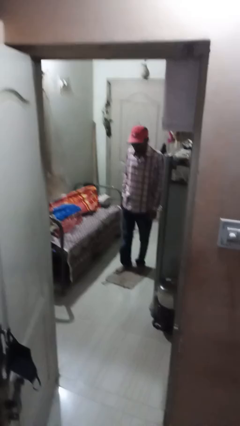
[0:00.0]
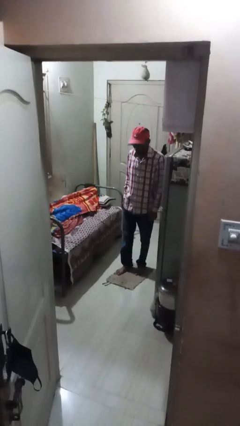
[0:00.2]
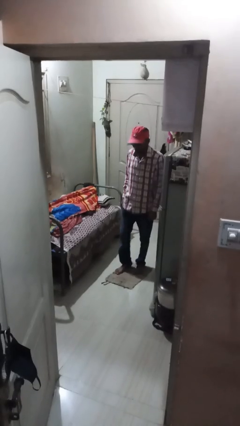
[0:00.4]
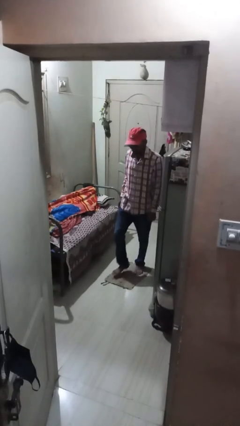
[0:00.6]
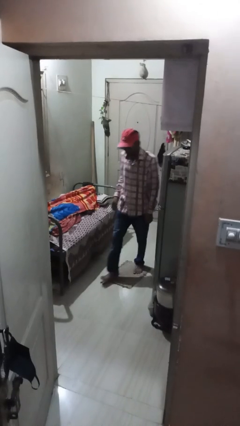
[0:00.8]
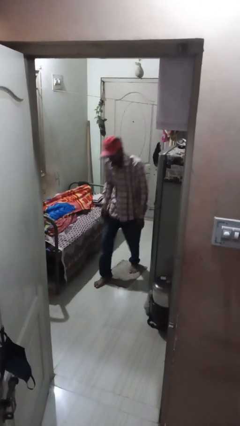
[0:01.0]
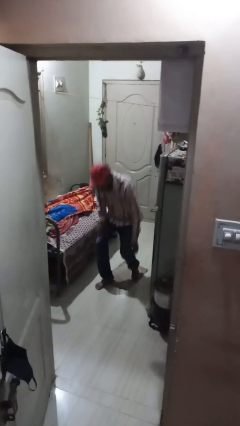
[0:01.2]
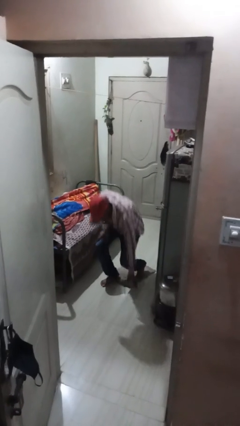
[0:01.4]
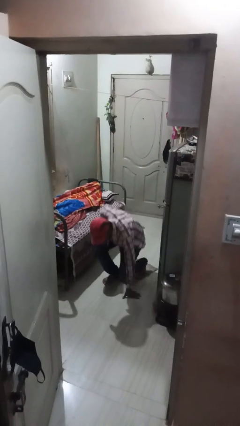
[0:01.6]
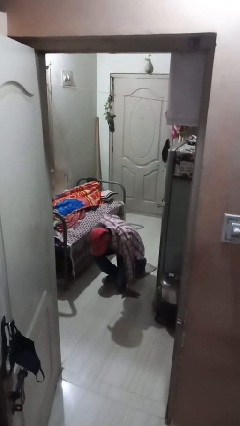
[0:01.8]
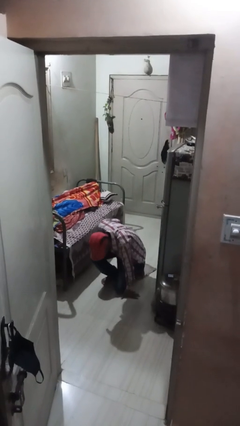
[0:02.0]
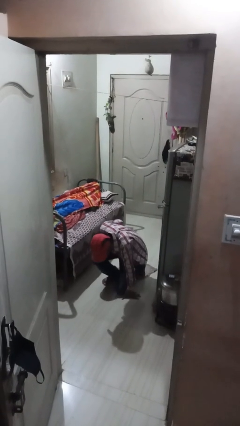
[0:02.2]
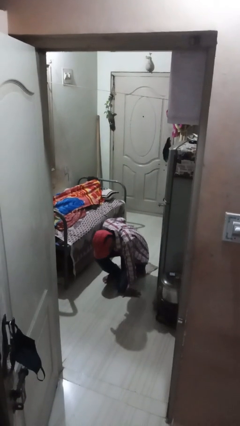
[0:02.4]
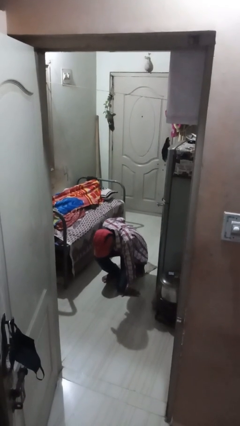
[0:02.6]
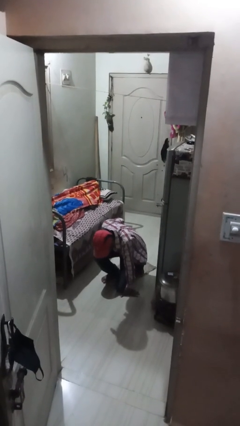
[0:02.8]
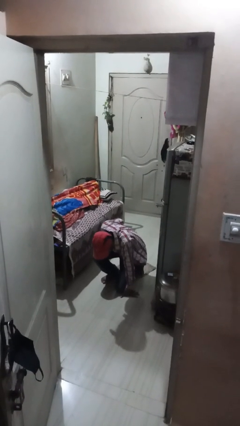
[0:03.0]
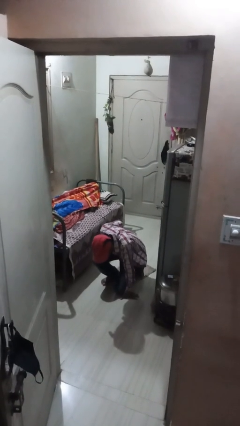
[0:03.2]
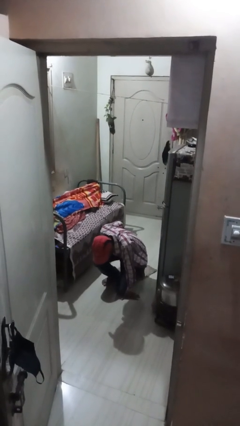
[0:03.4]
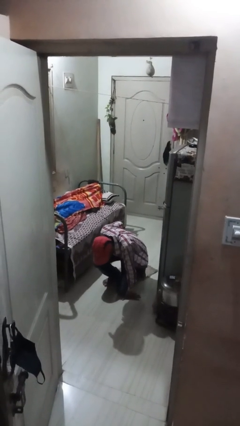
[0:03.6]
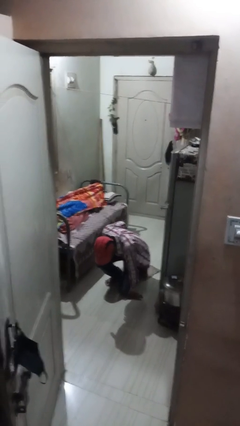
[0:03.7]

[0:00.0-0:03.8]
person kneels

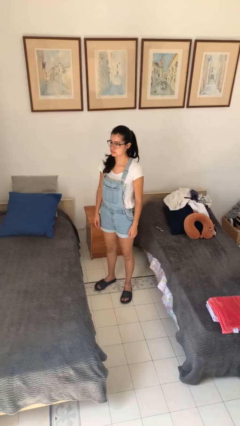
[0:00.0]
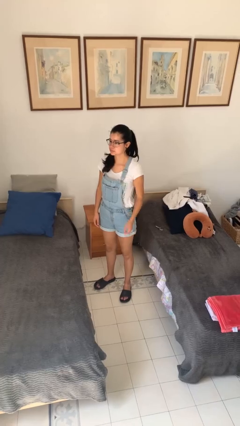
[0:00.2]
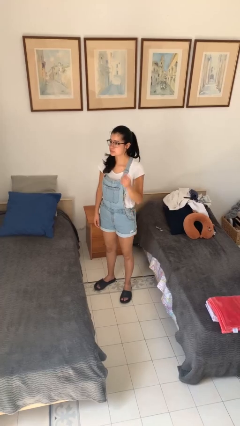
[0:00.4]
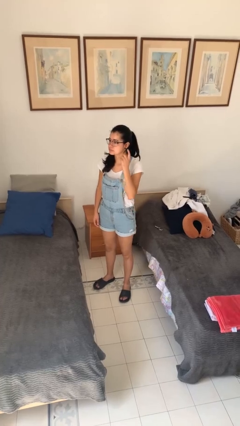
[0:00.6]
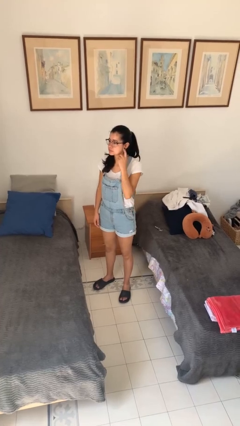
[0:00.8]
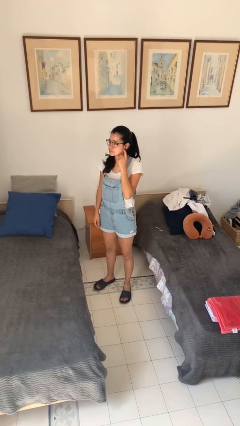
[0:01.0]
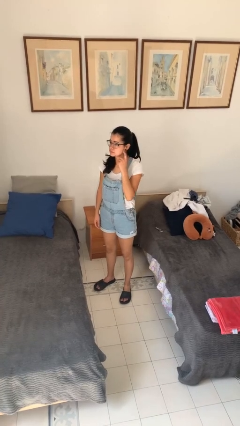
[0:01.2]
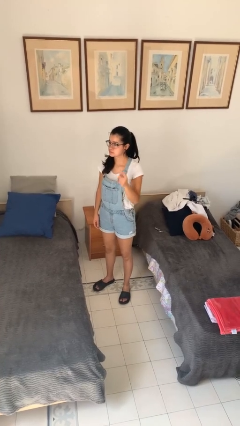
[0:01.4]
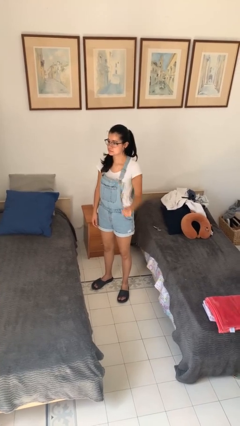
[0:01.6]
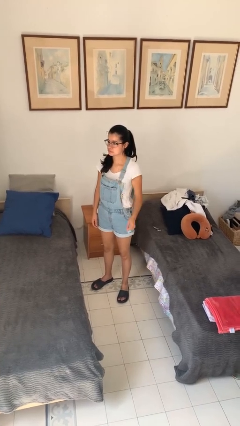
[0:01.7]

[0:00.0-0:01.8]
person gestures heart

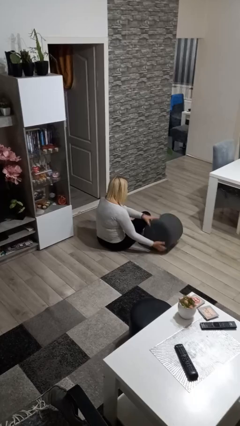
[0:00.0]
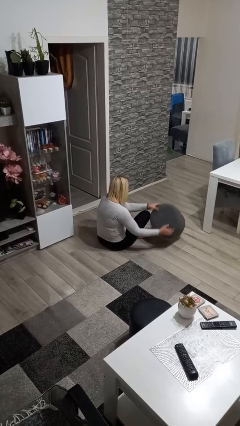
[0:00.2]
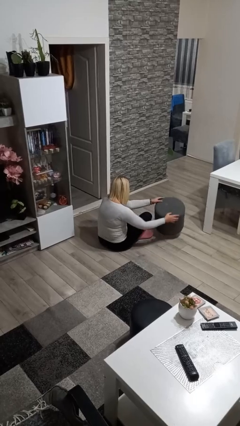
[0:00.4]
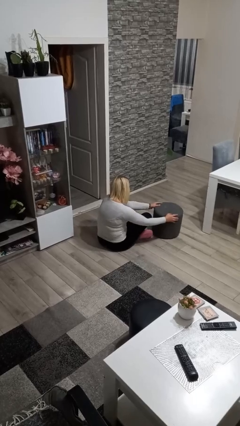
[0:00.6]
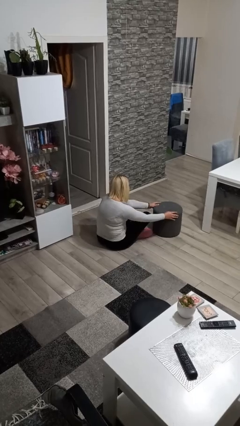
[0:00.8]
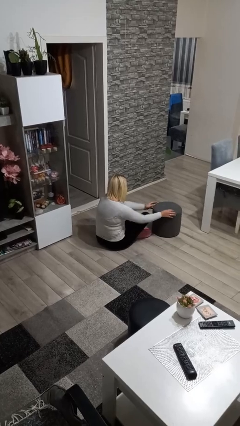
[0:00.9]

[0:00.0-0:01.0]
person sets upright furniture

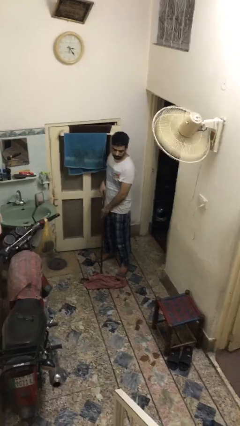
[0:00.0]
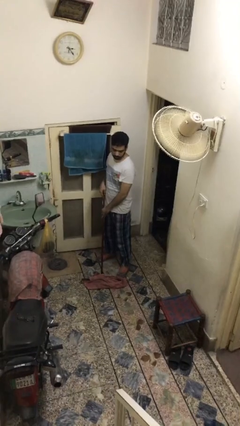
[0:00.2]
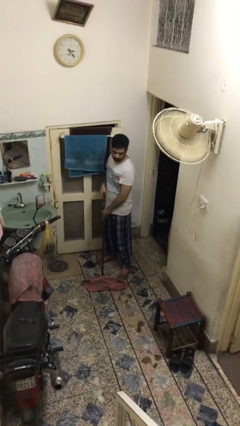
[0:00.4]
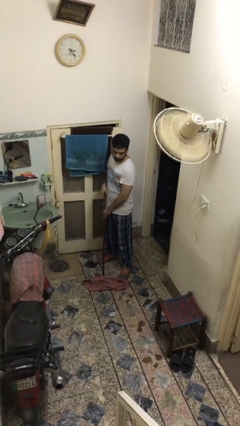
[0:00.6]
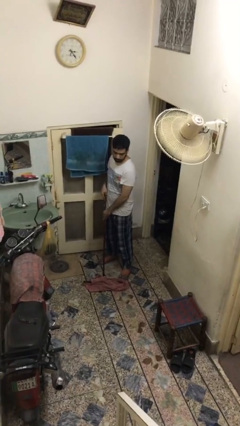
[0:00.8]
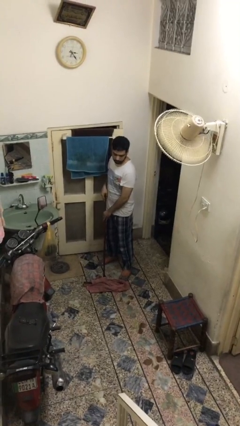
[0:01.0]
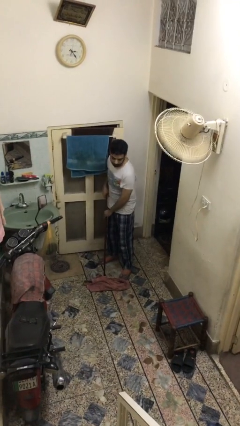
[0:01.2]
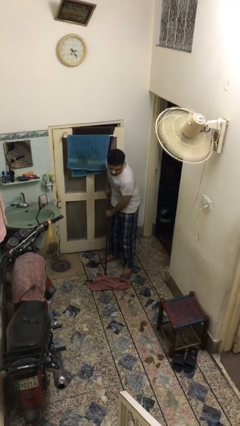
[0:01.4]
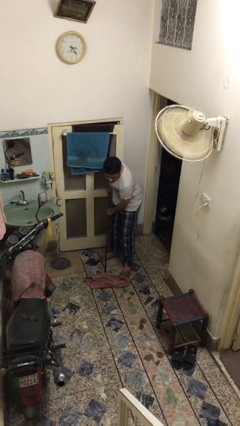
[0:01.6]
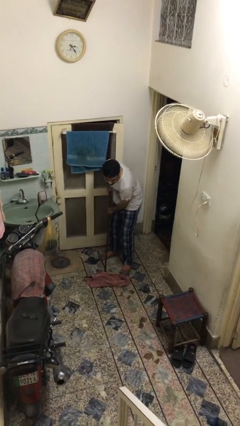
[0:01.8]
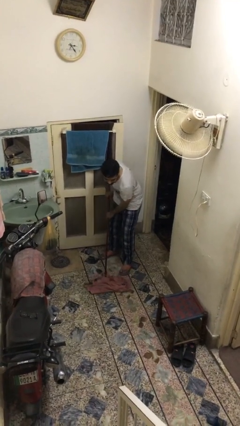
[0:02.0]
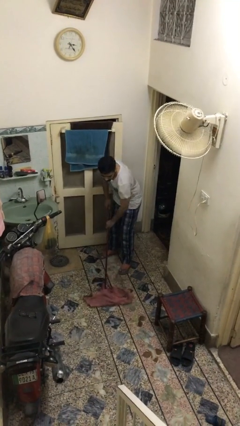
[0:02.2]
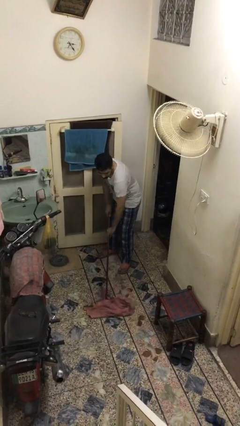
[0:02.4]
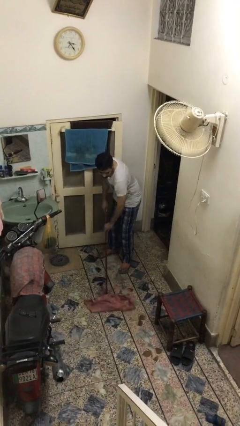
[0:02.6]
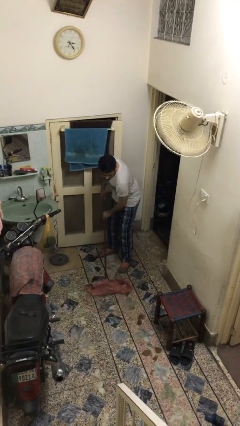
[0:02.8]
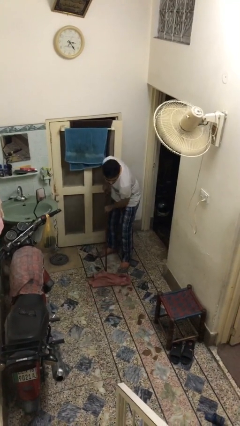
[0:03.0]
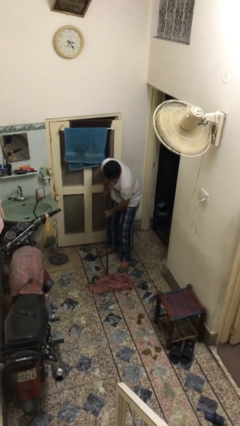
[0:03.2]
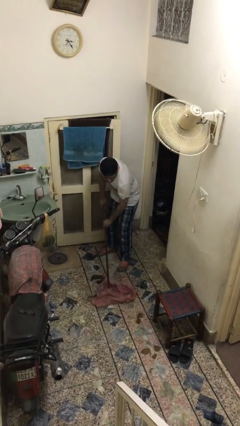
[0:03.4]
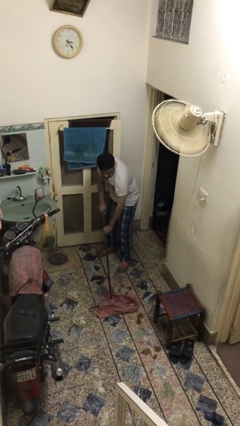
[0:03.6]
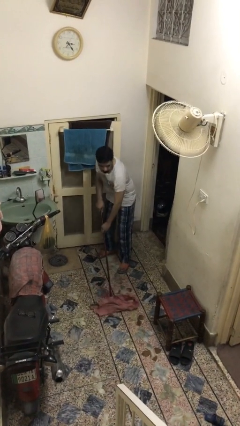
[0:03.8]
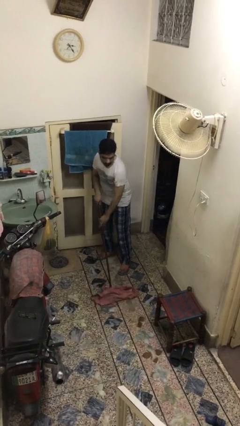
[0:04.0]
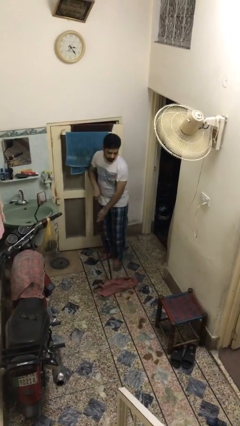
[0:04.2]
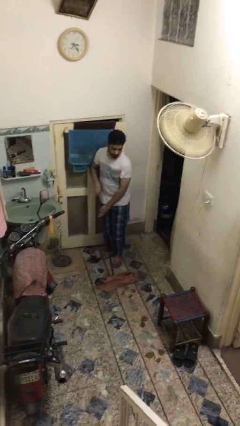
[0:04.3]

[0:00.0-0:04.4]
person mops

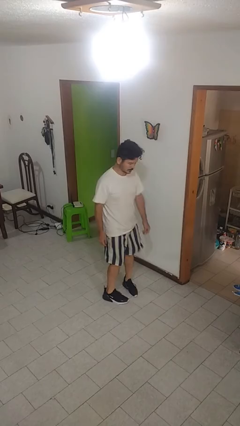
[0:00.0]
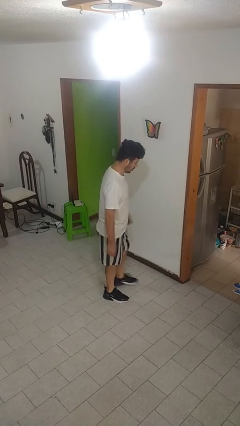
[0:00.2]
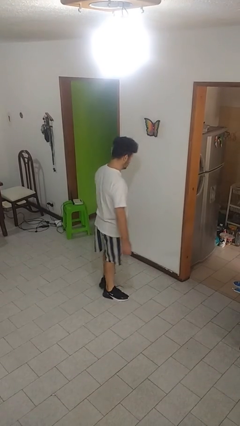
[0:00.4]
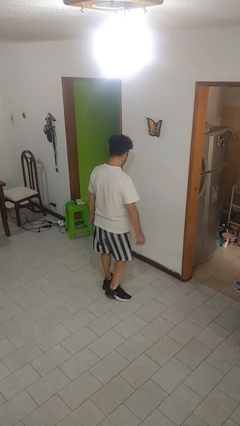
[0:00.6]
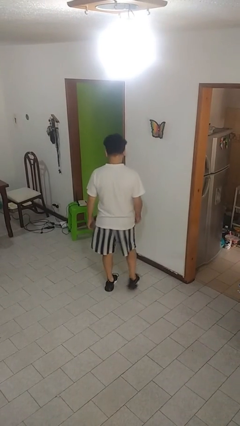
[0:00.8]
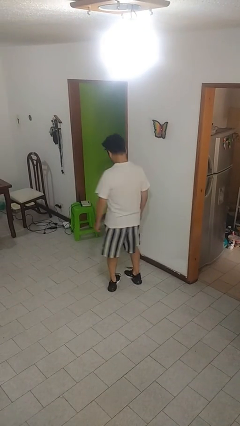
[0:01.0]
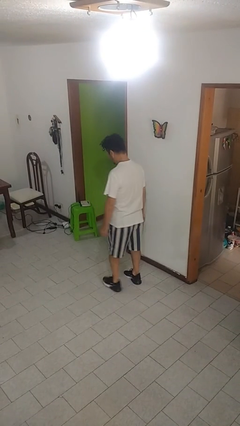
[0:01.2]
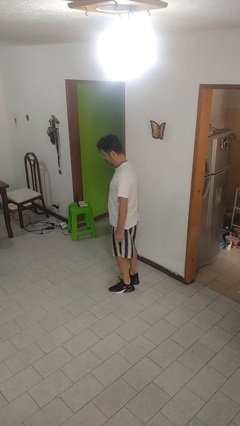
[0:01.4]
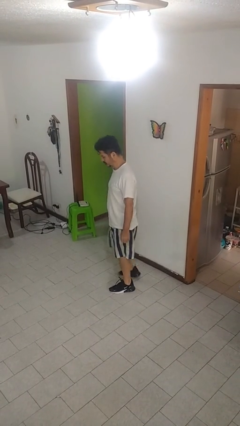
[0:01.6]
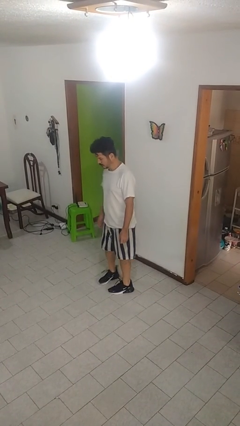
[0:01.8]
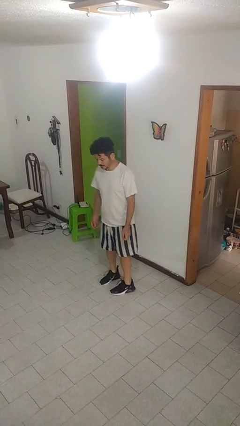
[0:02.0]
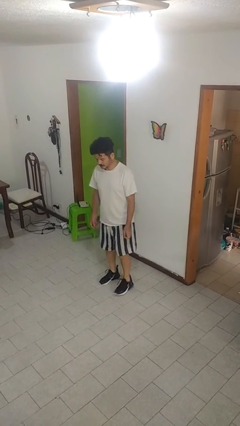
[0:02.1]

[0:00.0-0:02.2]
person twirls

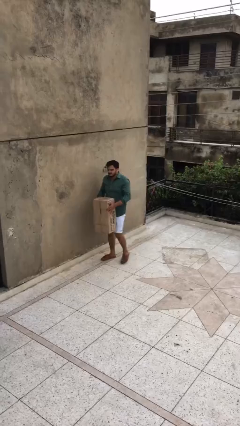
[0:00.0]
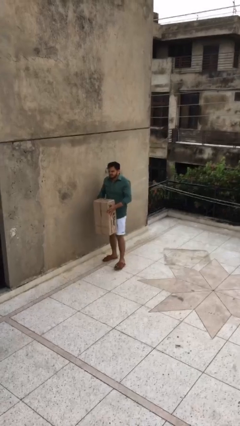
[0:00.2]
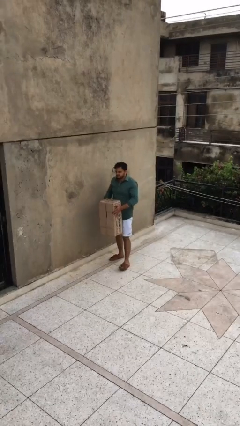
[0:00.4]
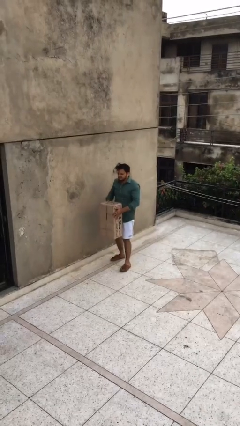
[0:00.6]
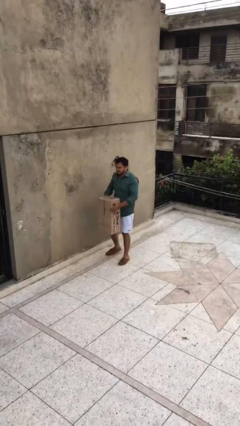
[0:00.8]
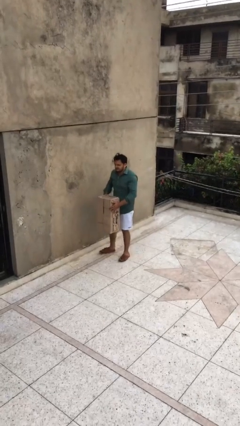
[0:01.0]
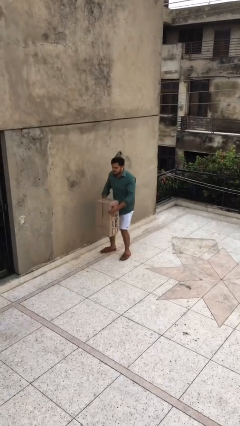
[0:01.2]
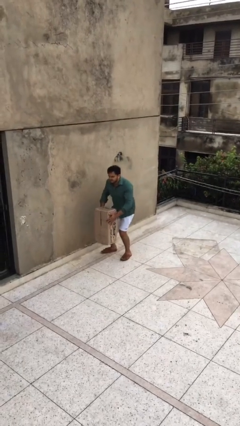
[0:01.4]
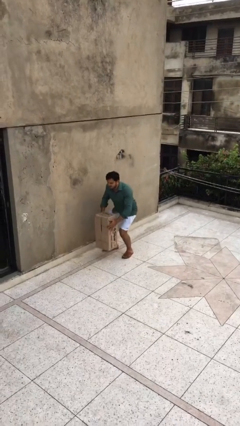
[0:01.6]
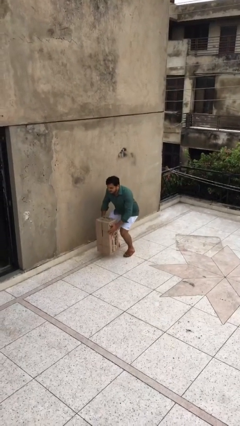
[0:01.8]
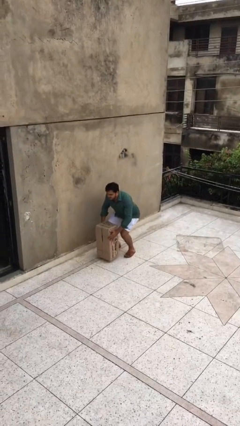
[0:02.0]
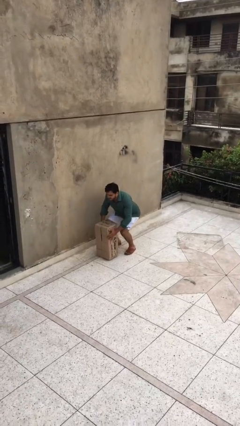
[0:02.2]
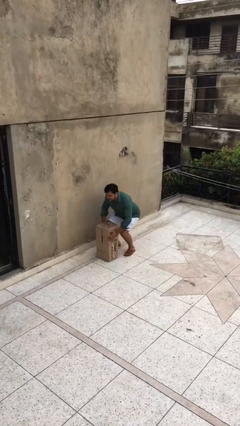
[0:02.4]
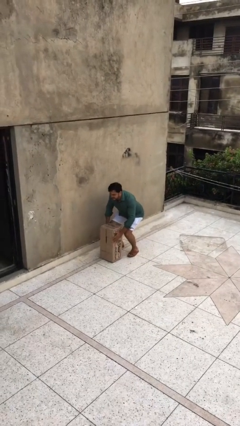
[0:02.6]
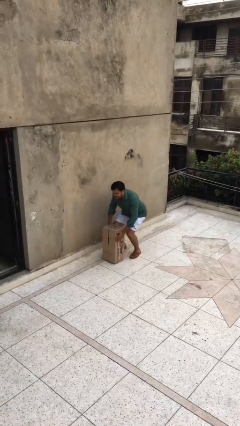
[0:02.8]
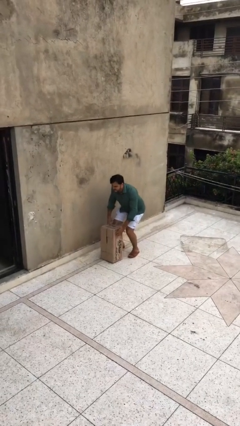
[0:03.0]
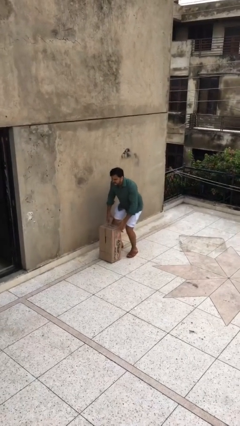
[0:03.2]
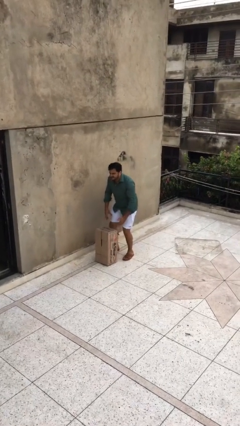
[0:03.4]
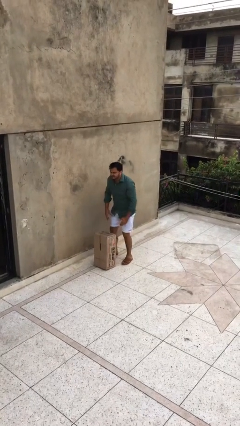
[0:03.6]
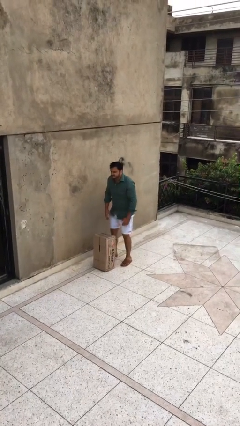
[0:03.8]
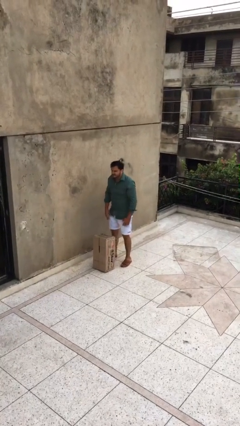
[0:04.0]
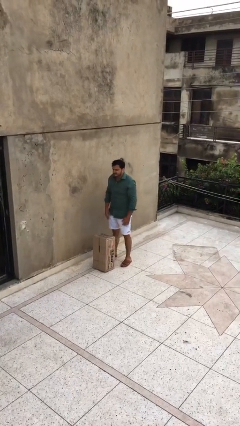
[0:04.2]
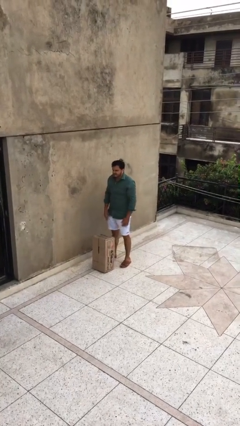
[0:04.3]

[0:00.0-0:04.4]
person puts down object on floor
